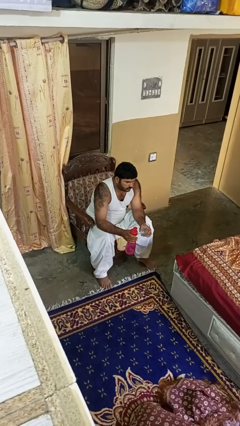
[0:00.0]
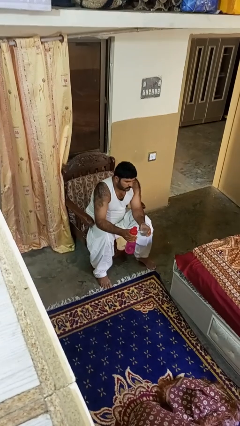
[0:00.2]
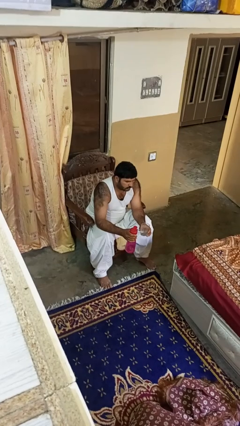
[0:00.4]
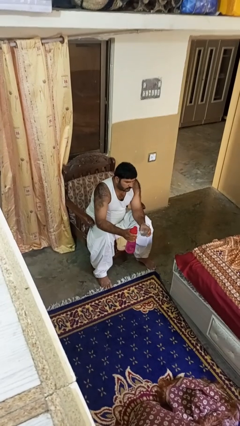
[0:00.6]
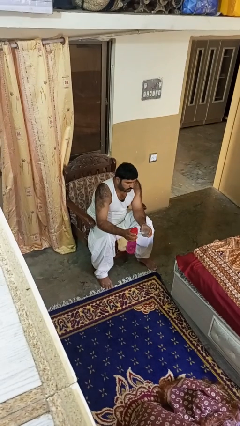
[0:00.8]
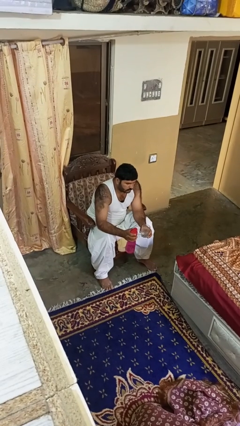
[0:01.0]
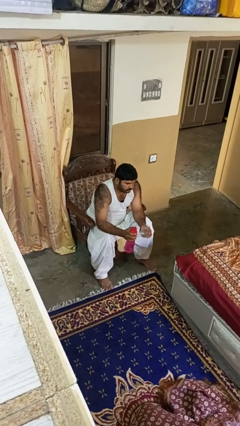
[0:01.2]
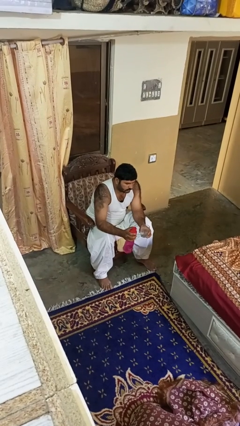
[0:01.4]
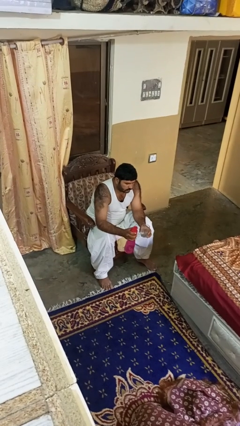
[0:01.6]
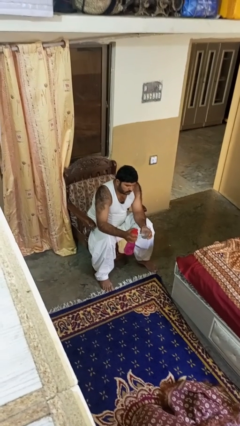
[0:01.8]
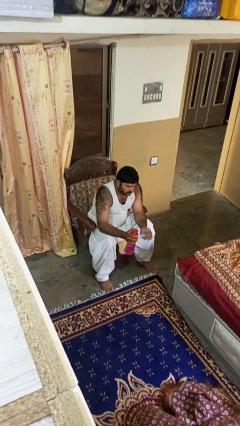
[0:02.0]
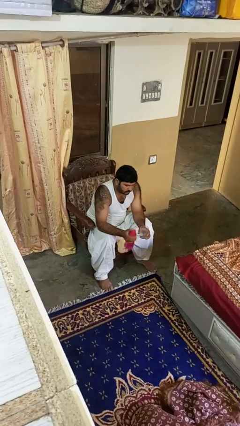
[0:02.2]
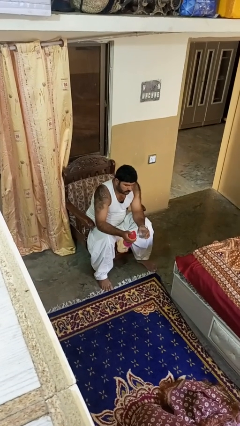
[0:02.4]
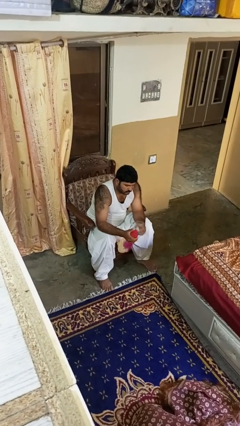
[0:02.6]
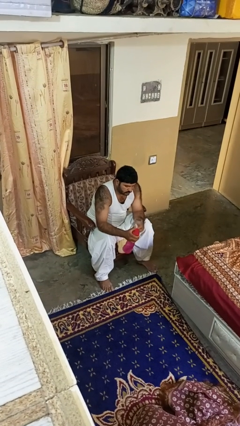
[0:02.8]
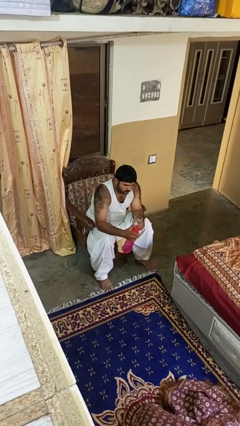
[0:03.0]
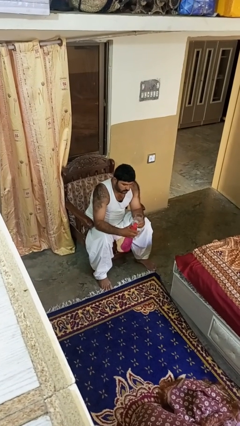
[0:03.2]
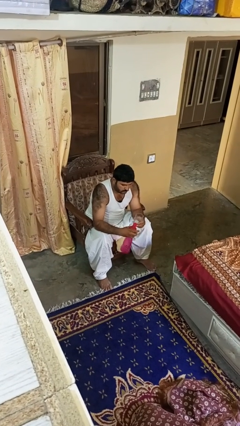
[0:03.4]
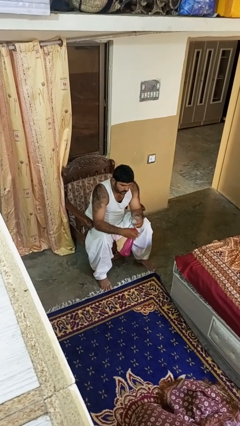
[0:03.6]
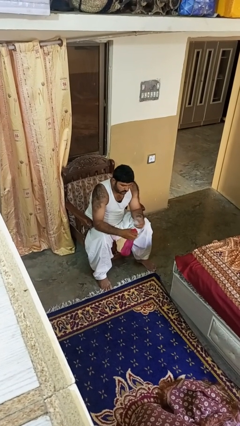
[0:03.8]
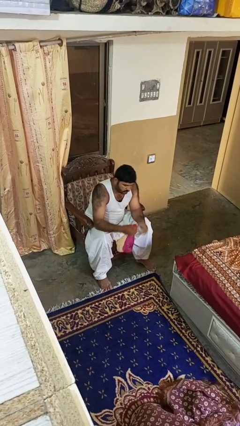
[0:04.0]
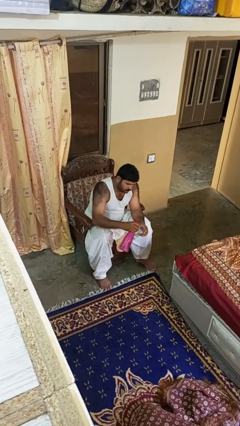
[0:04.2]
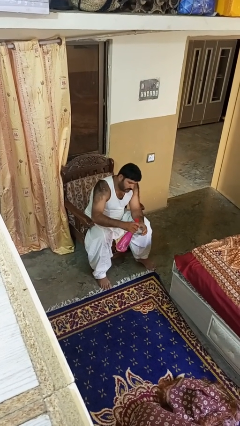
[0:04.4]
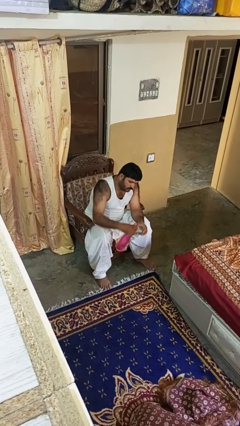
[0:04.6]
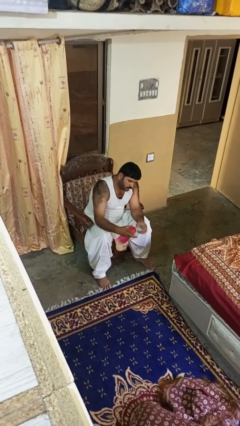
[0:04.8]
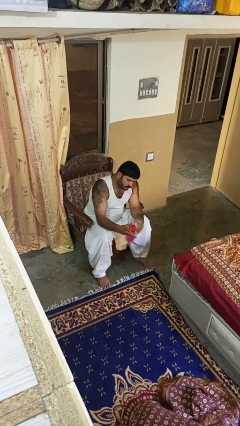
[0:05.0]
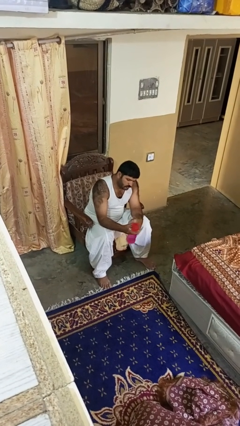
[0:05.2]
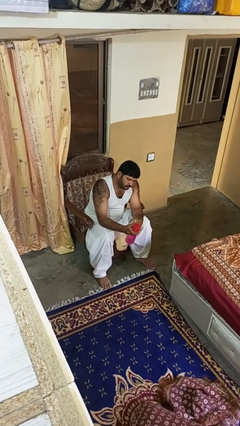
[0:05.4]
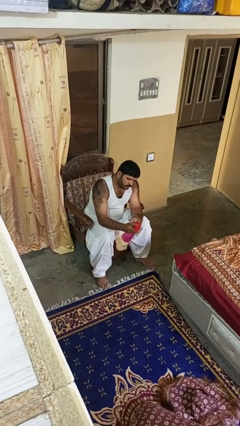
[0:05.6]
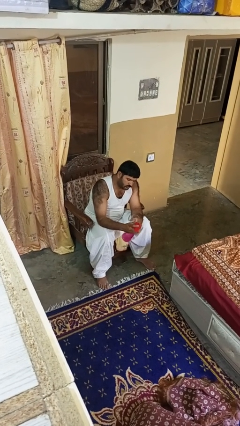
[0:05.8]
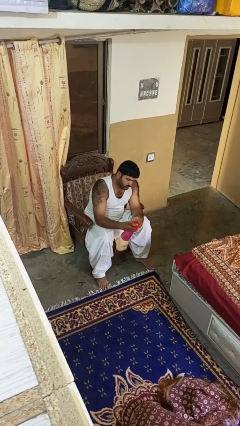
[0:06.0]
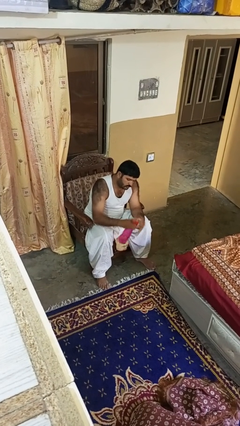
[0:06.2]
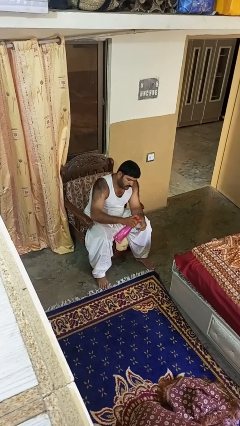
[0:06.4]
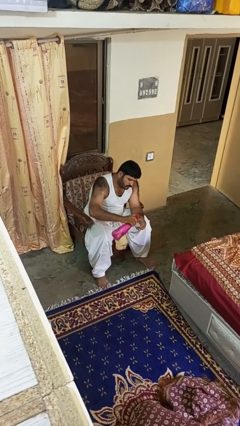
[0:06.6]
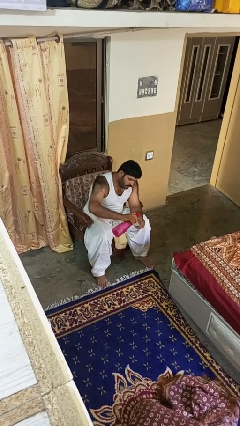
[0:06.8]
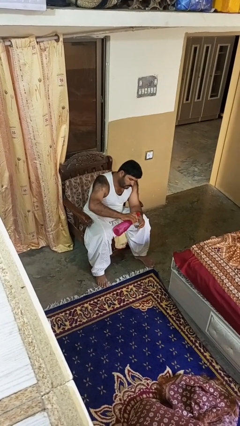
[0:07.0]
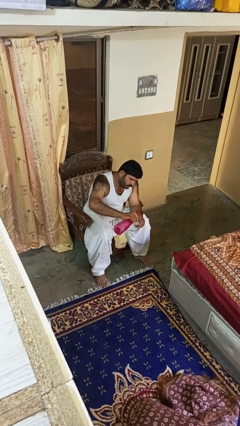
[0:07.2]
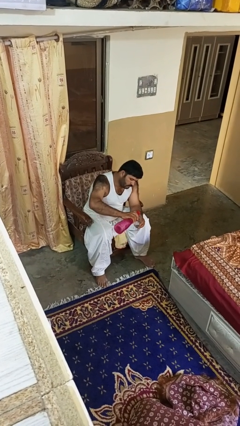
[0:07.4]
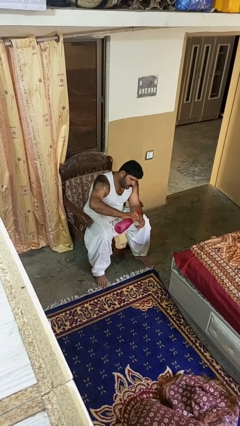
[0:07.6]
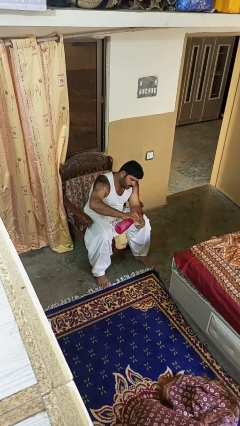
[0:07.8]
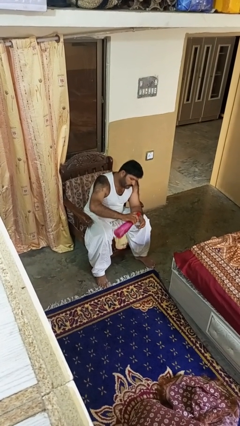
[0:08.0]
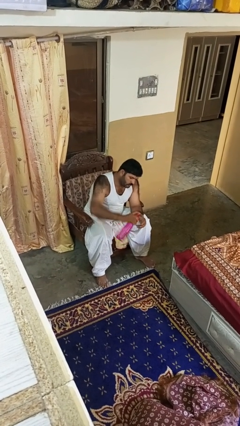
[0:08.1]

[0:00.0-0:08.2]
person pours liquid into cup

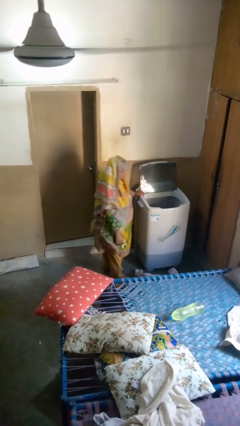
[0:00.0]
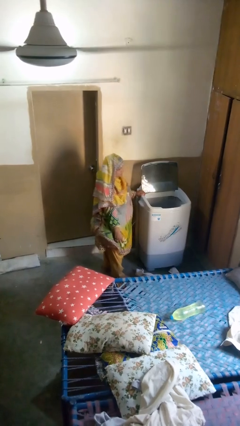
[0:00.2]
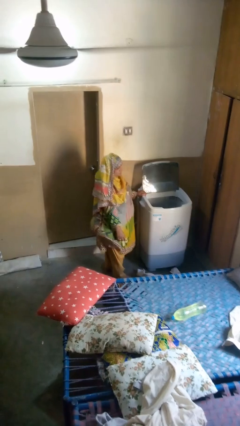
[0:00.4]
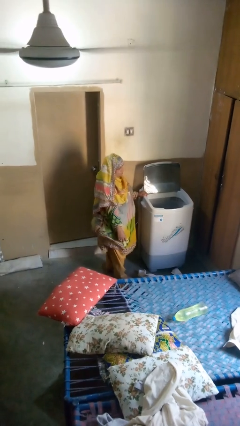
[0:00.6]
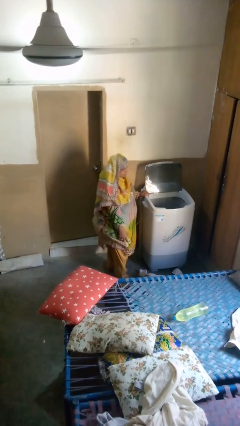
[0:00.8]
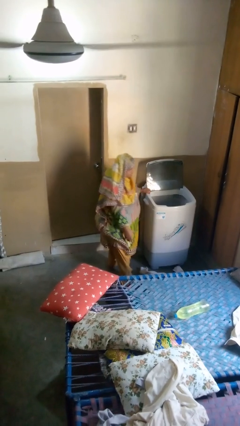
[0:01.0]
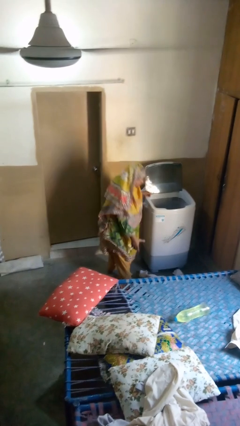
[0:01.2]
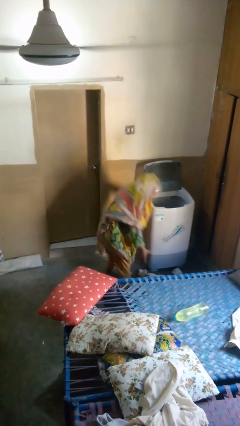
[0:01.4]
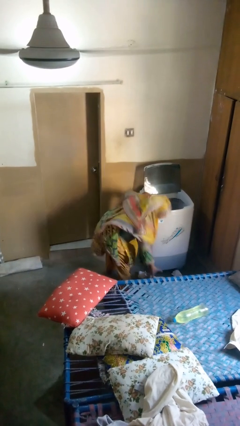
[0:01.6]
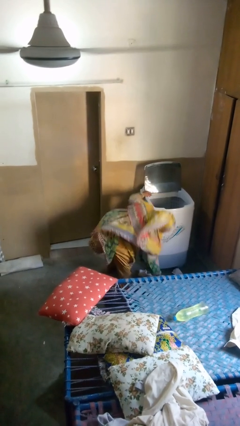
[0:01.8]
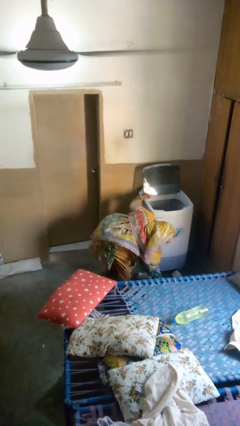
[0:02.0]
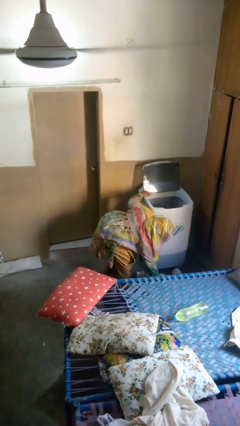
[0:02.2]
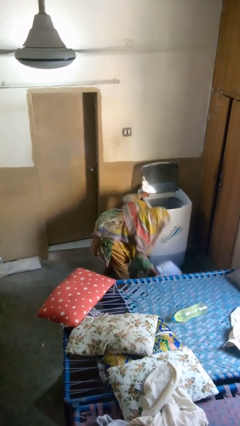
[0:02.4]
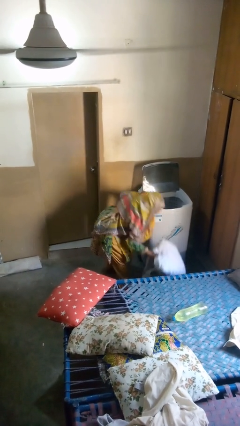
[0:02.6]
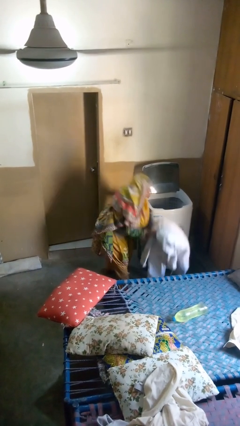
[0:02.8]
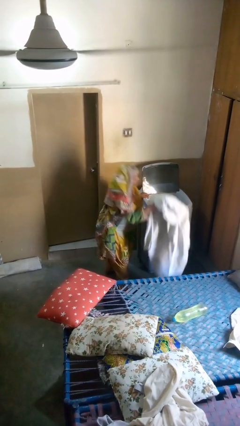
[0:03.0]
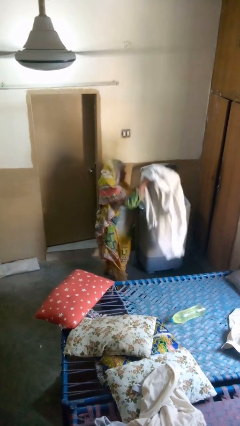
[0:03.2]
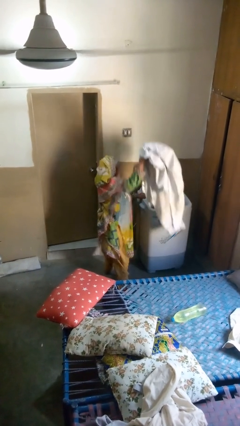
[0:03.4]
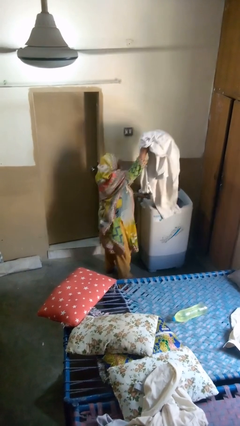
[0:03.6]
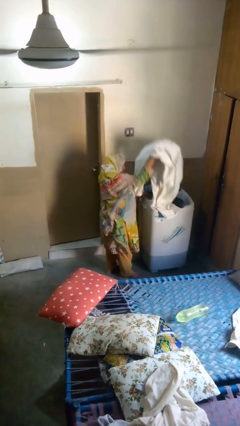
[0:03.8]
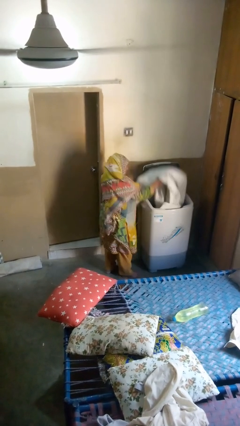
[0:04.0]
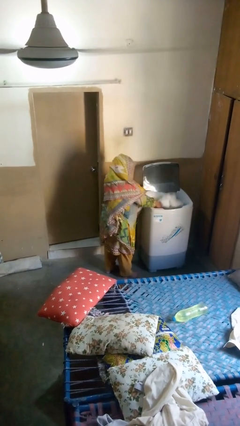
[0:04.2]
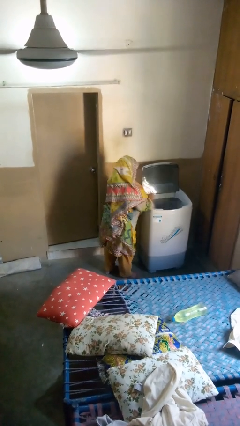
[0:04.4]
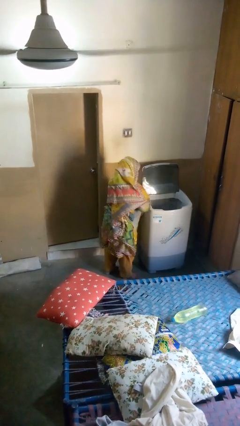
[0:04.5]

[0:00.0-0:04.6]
person loads clotheswasher

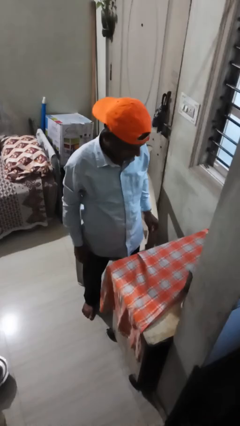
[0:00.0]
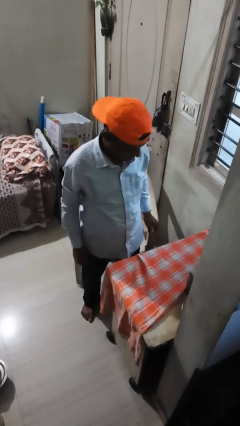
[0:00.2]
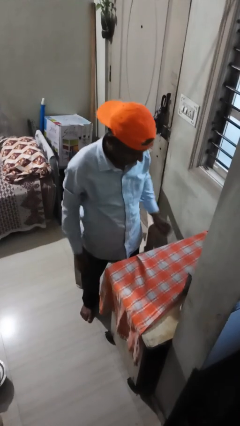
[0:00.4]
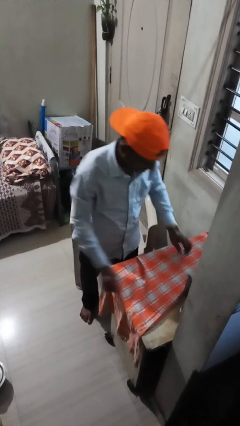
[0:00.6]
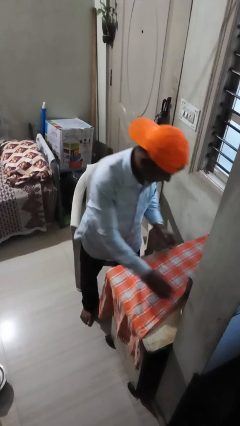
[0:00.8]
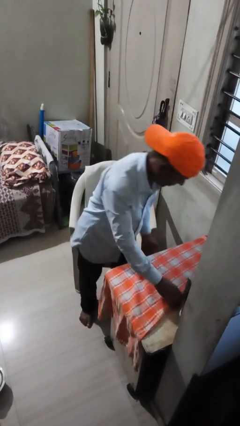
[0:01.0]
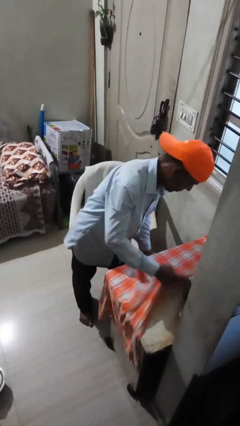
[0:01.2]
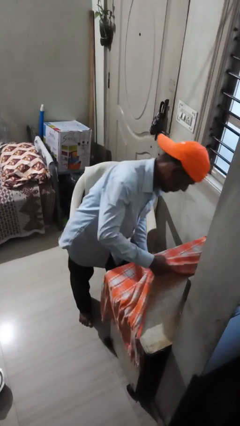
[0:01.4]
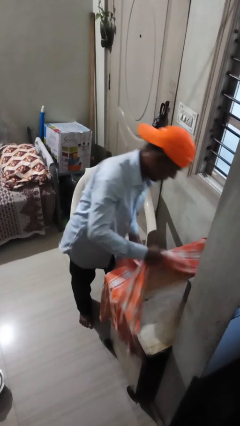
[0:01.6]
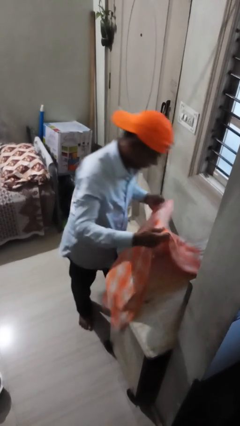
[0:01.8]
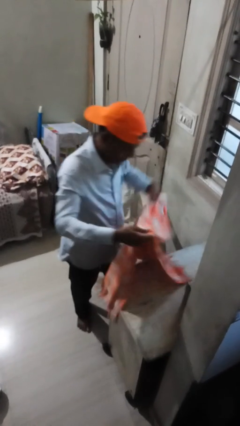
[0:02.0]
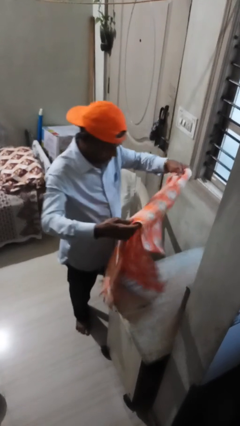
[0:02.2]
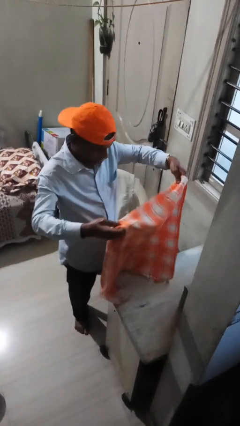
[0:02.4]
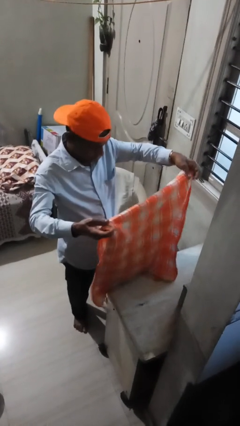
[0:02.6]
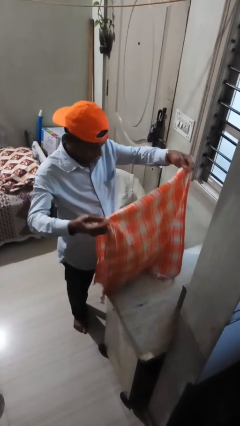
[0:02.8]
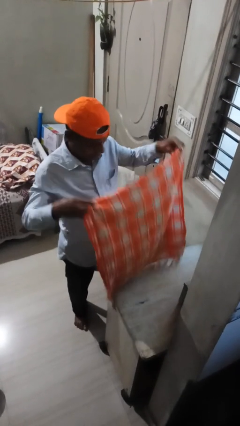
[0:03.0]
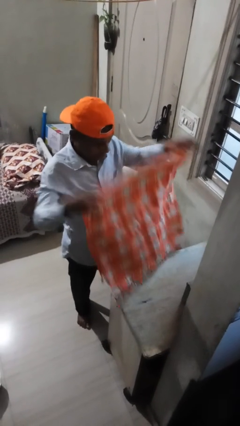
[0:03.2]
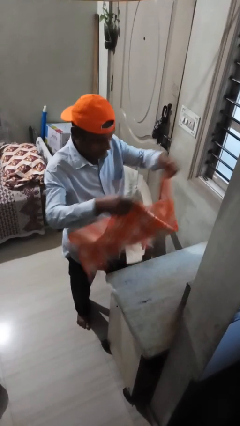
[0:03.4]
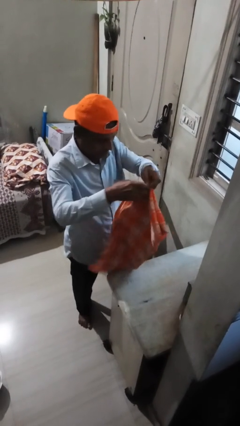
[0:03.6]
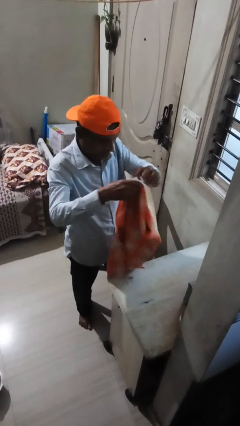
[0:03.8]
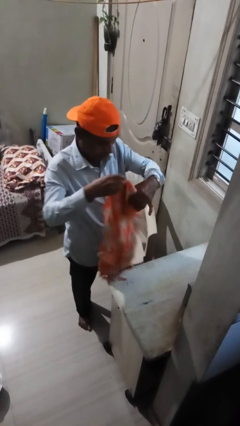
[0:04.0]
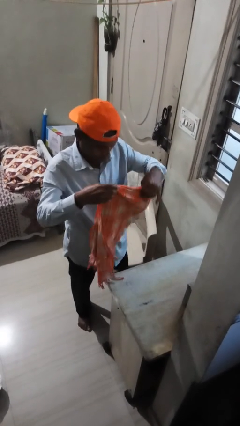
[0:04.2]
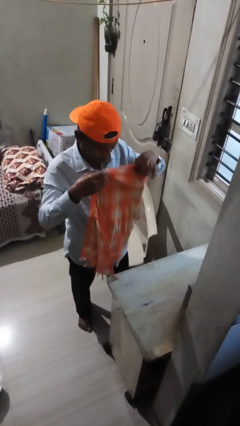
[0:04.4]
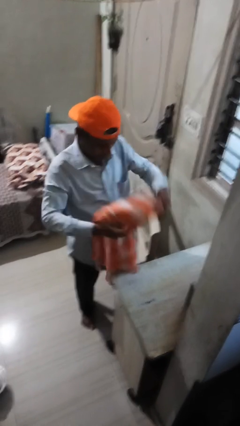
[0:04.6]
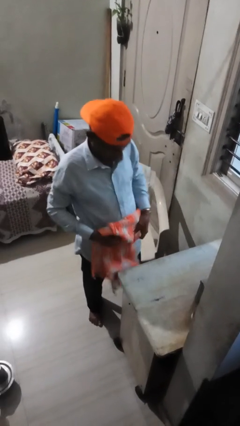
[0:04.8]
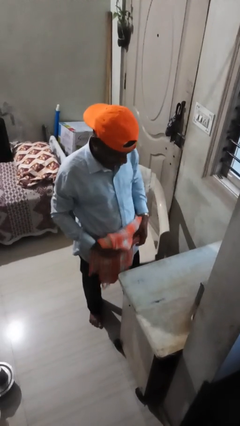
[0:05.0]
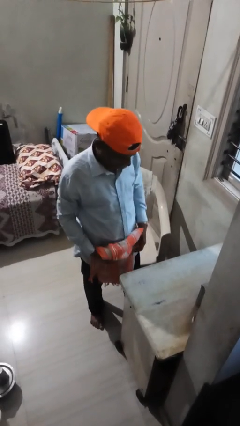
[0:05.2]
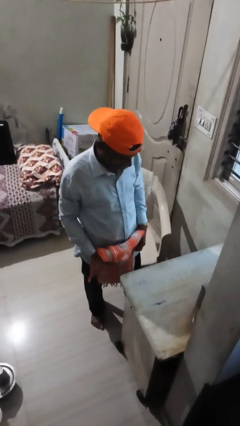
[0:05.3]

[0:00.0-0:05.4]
person folds tablecloth
